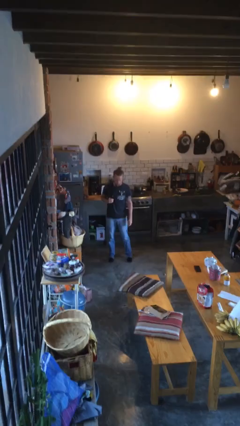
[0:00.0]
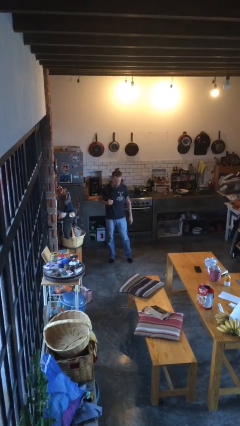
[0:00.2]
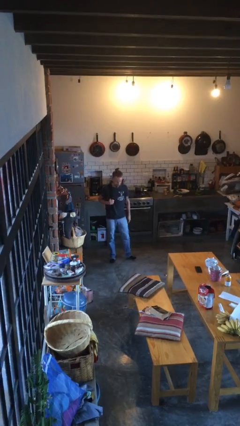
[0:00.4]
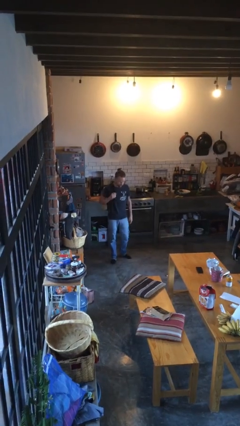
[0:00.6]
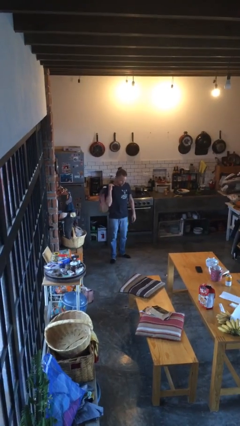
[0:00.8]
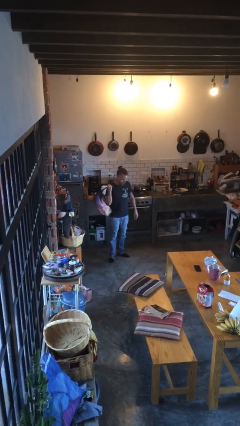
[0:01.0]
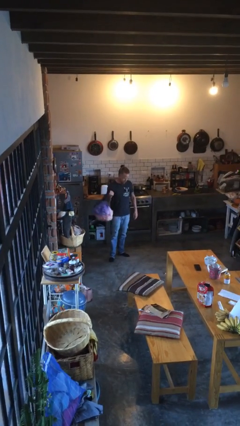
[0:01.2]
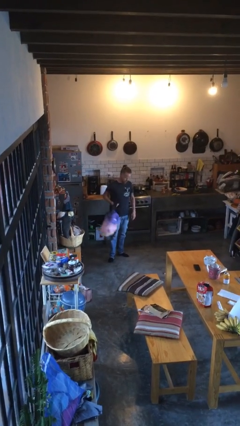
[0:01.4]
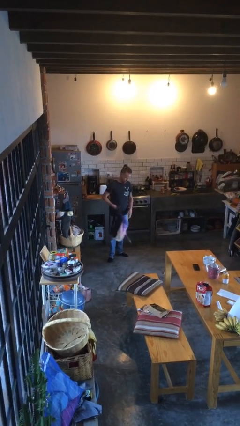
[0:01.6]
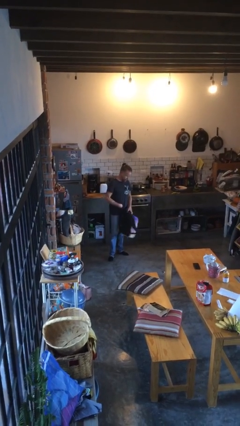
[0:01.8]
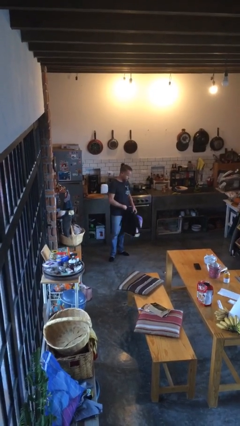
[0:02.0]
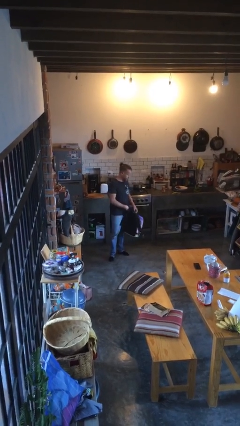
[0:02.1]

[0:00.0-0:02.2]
person takes off backpack

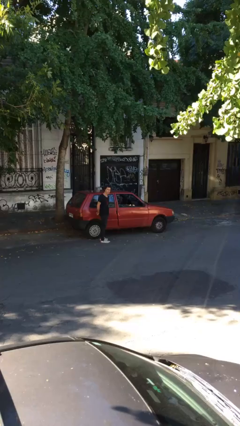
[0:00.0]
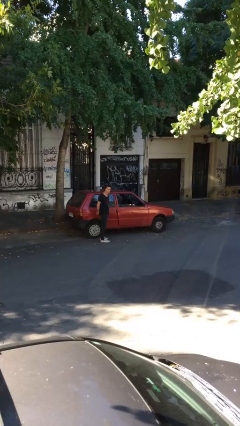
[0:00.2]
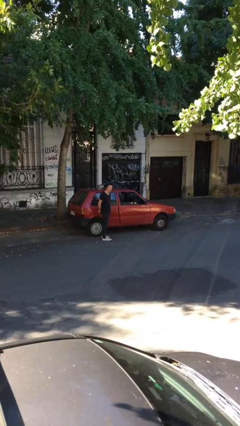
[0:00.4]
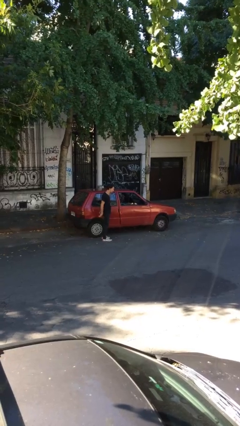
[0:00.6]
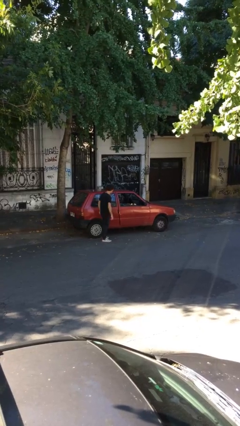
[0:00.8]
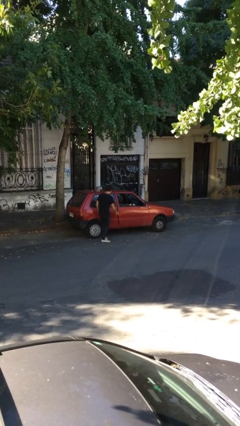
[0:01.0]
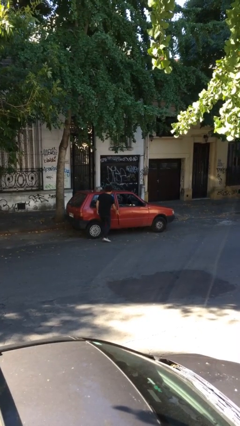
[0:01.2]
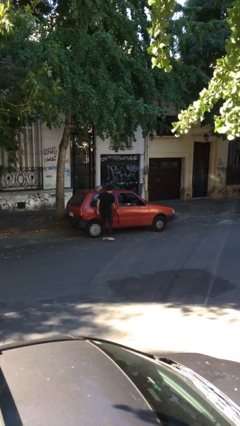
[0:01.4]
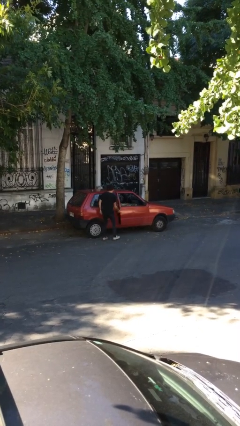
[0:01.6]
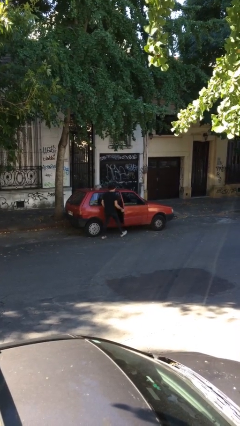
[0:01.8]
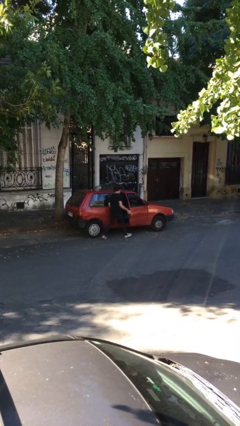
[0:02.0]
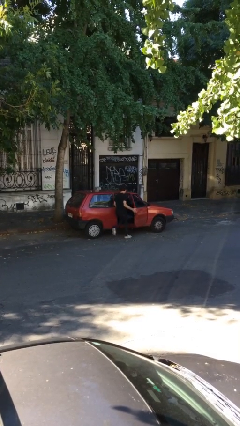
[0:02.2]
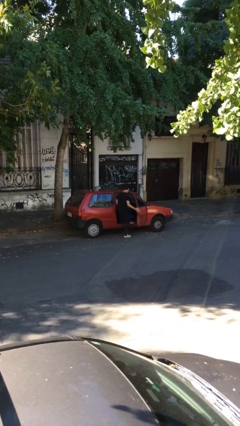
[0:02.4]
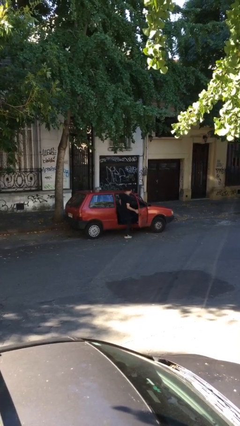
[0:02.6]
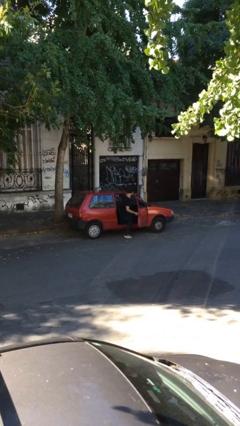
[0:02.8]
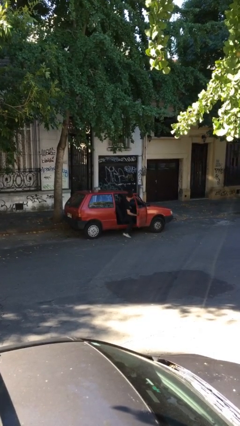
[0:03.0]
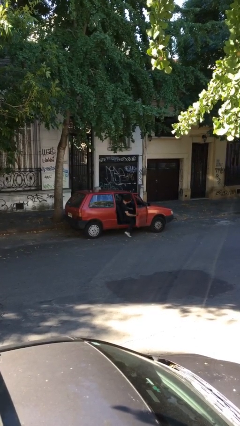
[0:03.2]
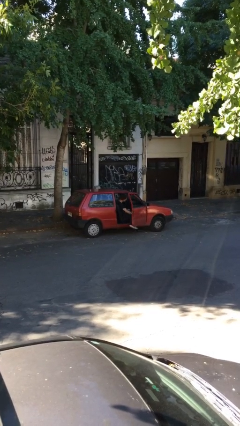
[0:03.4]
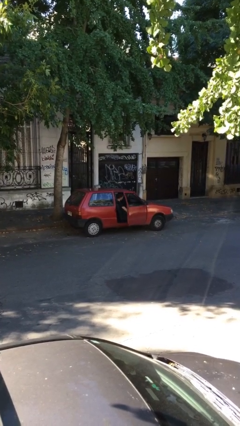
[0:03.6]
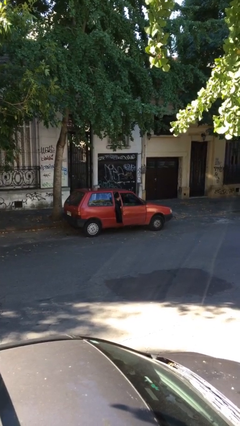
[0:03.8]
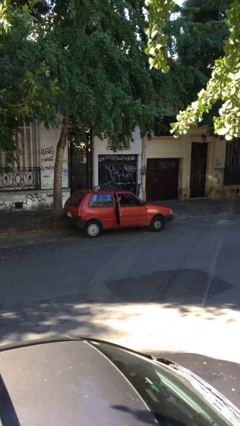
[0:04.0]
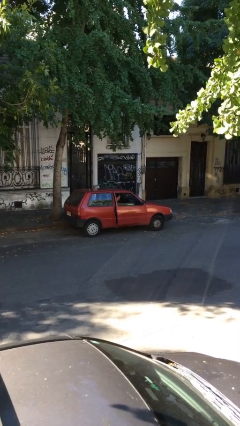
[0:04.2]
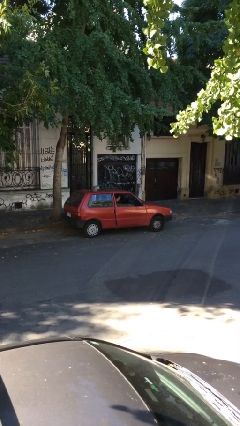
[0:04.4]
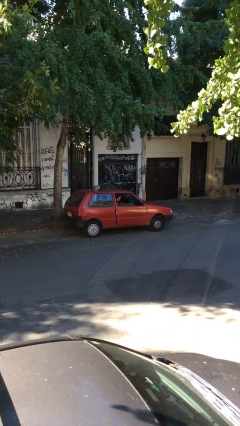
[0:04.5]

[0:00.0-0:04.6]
car picks up person

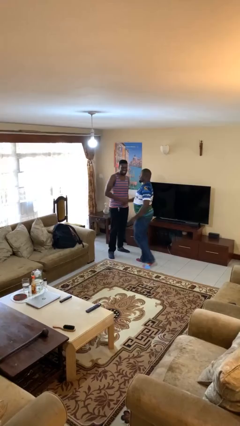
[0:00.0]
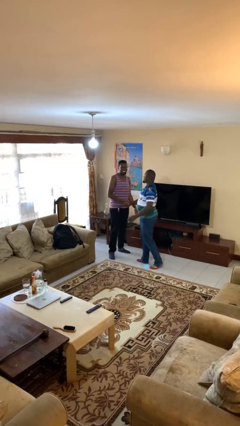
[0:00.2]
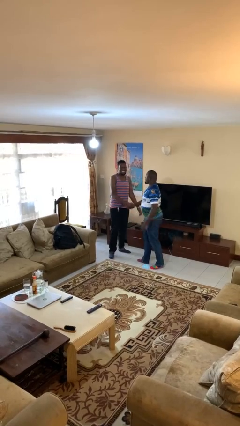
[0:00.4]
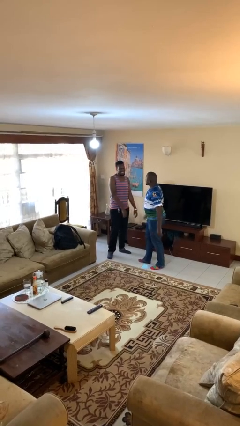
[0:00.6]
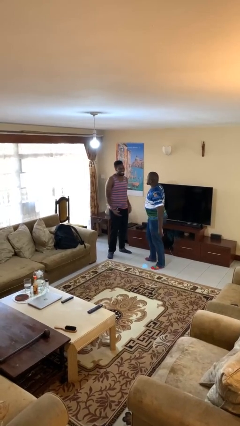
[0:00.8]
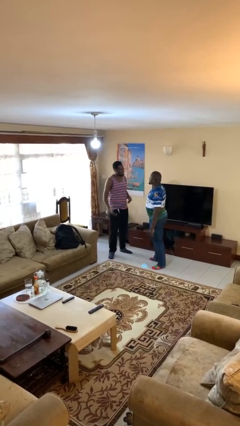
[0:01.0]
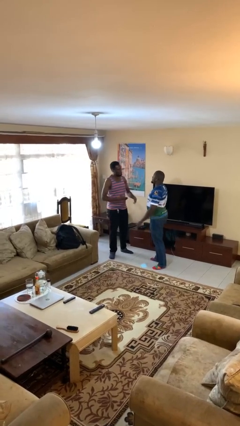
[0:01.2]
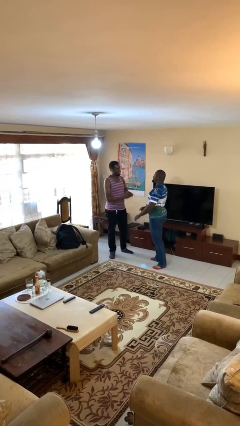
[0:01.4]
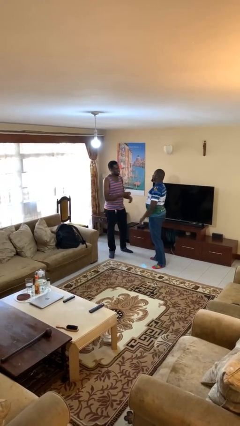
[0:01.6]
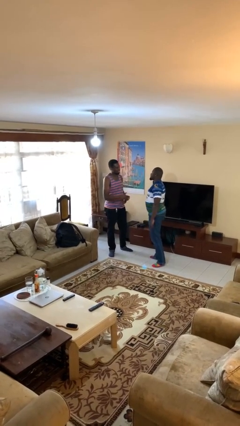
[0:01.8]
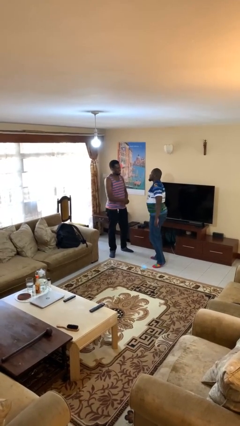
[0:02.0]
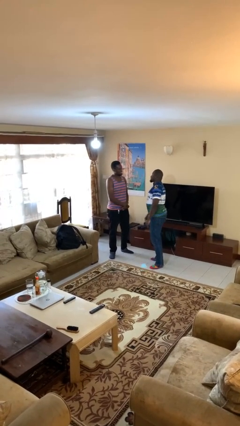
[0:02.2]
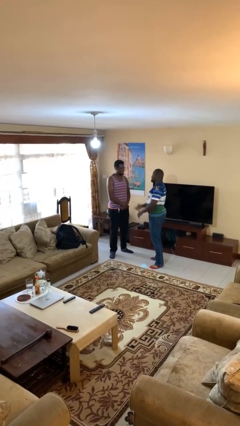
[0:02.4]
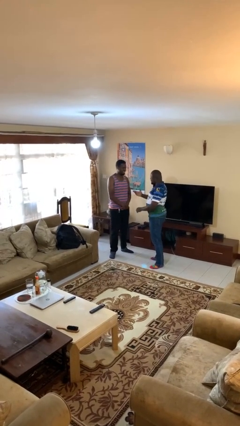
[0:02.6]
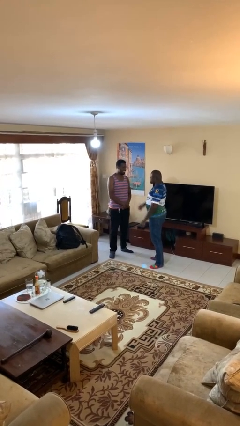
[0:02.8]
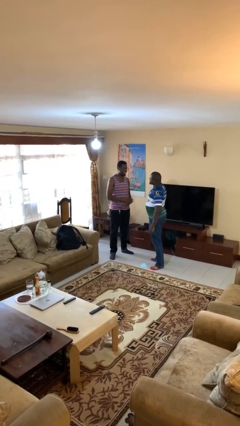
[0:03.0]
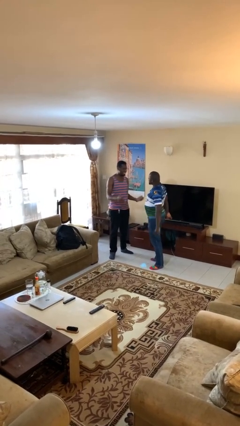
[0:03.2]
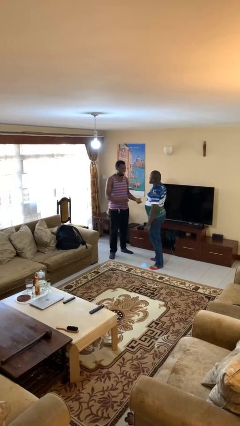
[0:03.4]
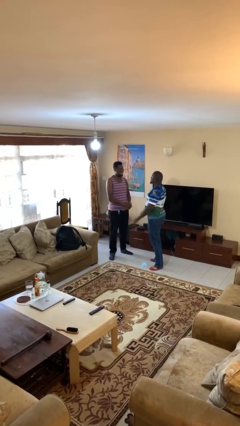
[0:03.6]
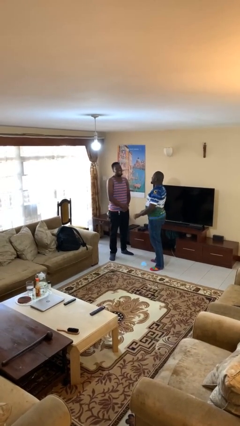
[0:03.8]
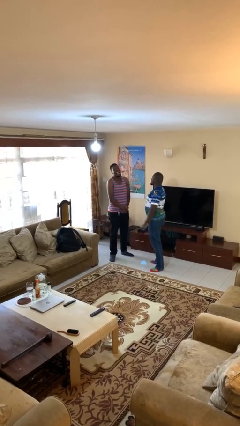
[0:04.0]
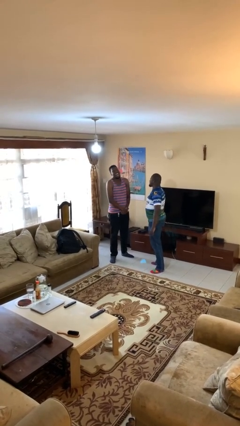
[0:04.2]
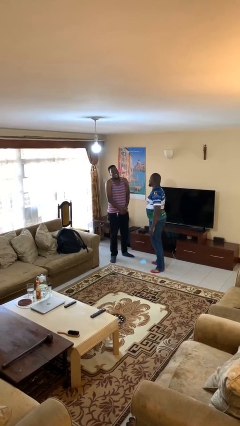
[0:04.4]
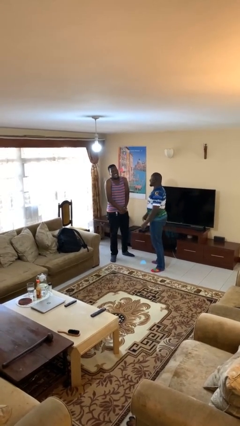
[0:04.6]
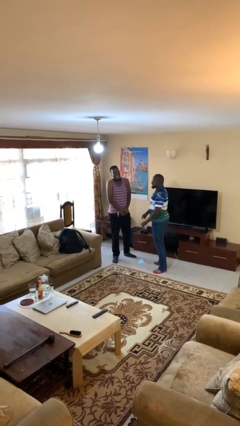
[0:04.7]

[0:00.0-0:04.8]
person talks to person

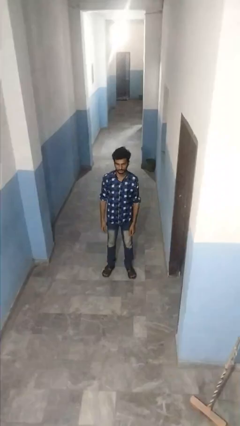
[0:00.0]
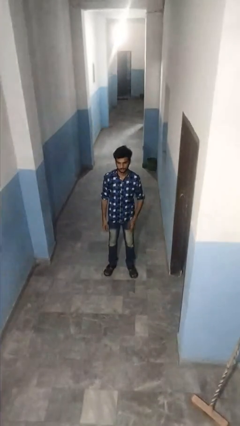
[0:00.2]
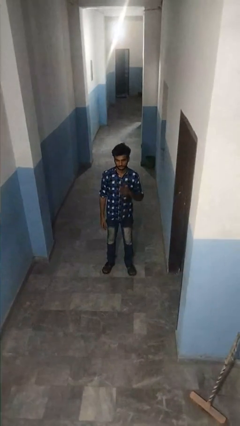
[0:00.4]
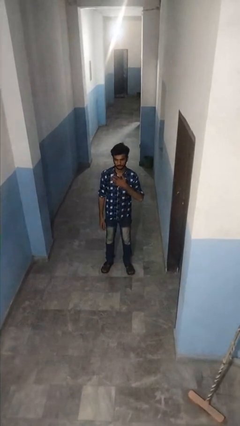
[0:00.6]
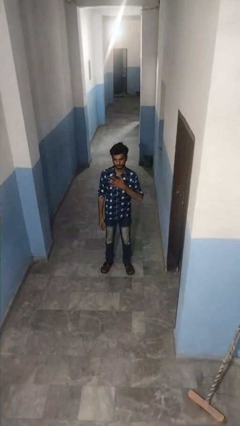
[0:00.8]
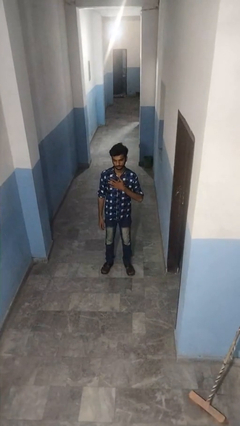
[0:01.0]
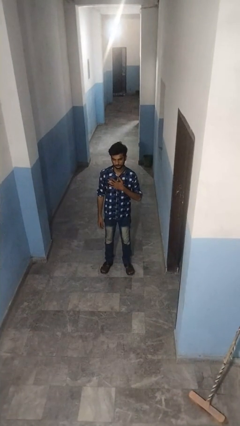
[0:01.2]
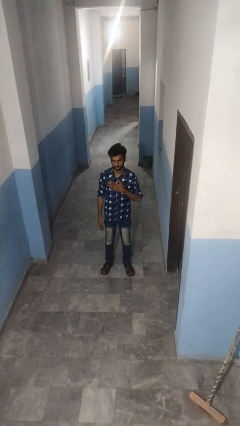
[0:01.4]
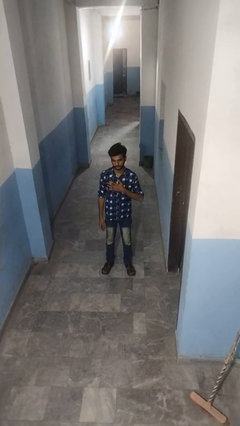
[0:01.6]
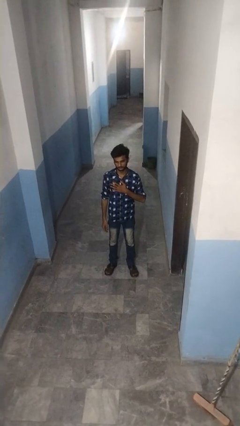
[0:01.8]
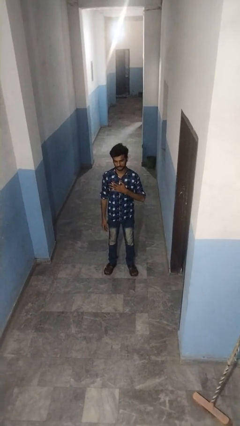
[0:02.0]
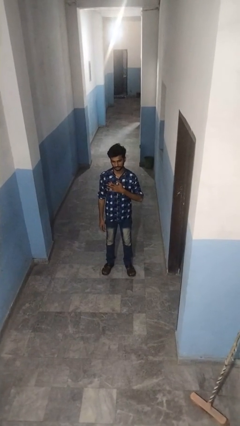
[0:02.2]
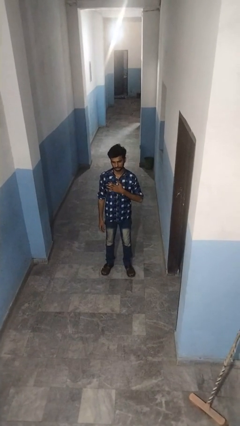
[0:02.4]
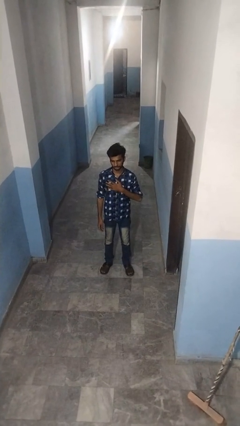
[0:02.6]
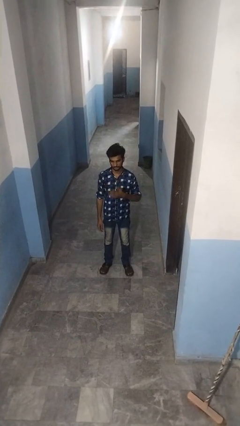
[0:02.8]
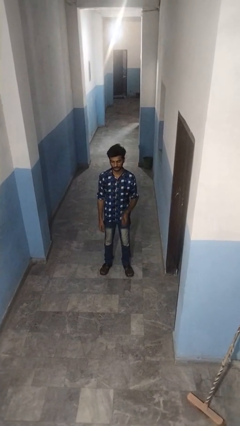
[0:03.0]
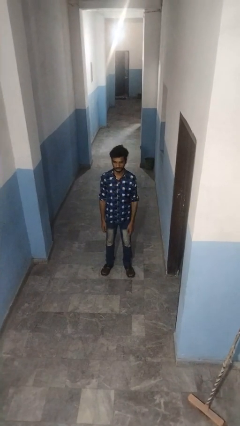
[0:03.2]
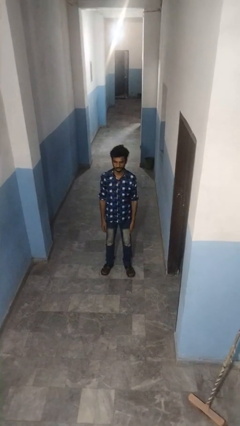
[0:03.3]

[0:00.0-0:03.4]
person drums on chest

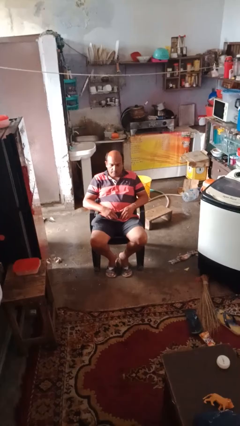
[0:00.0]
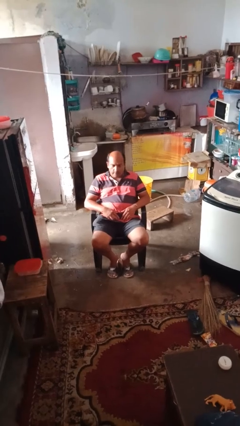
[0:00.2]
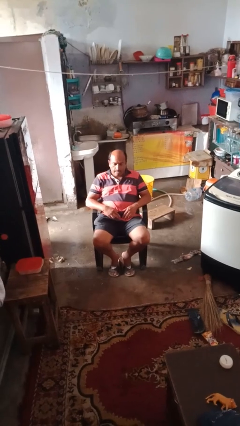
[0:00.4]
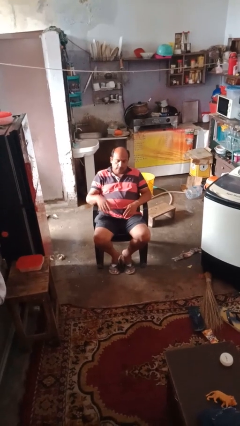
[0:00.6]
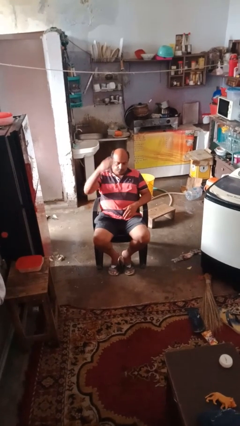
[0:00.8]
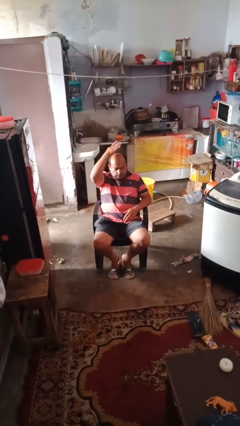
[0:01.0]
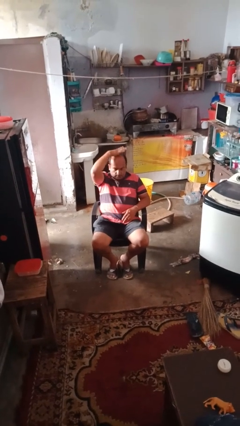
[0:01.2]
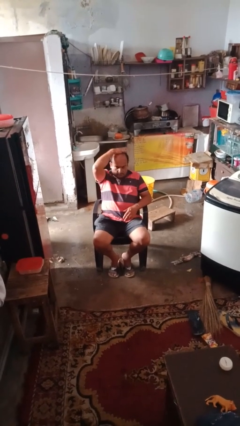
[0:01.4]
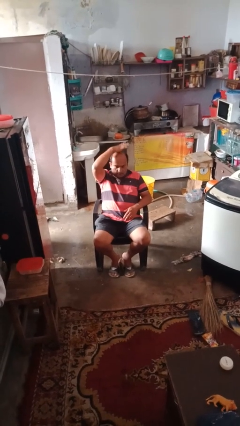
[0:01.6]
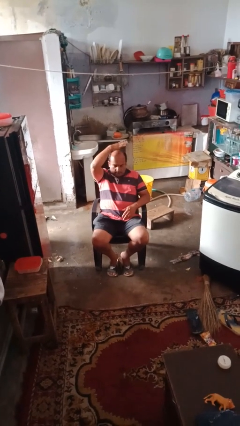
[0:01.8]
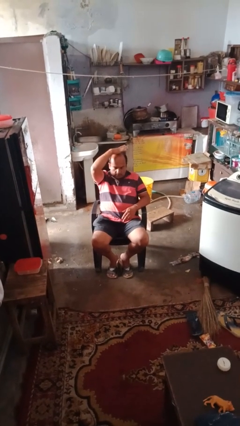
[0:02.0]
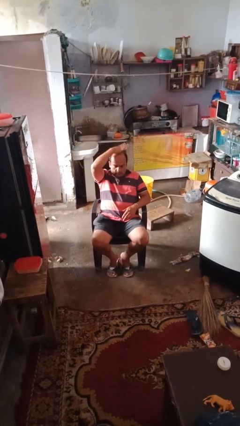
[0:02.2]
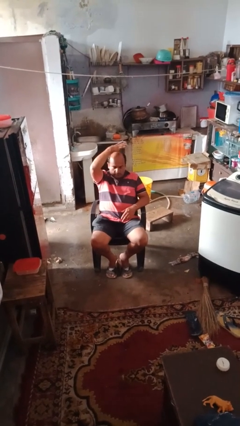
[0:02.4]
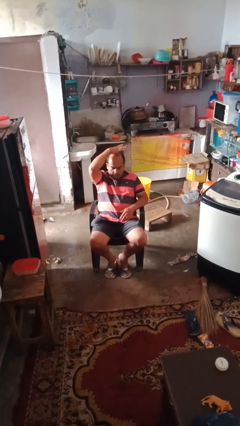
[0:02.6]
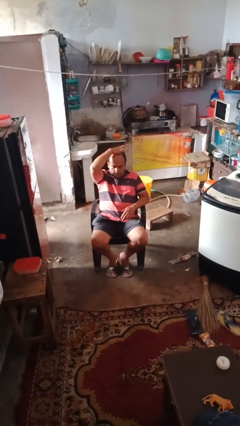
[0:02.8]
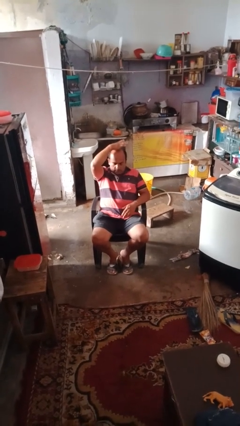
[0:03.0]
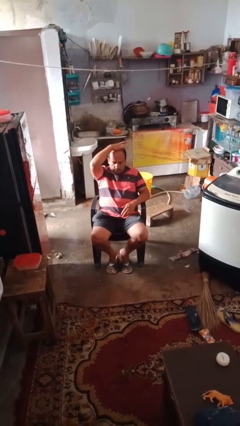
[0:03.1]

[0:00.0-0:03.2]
person holds object above head
